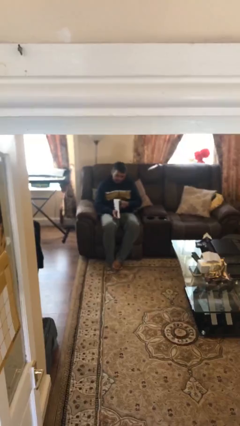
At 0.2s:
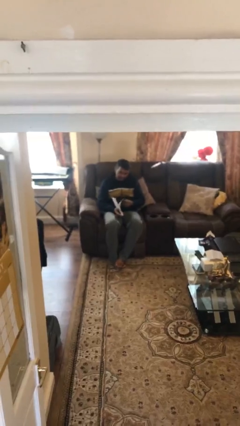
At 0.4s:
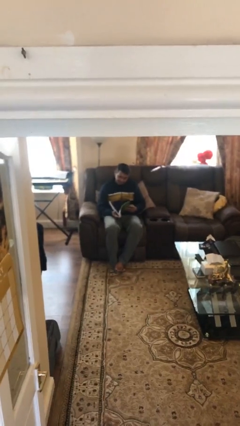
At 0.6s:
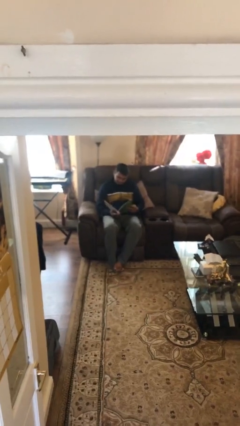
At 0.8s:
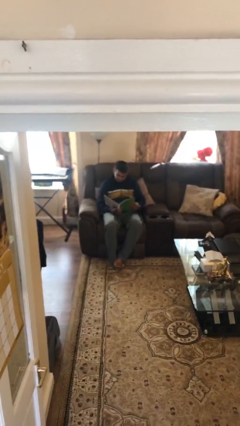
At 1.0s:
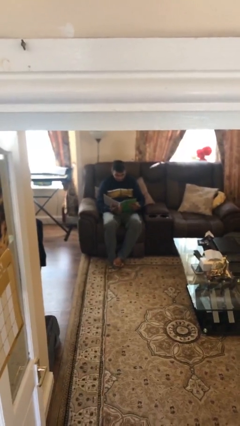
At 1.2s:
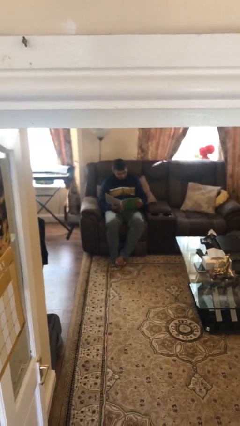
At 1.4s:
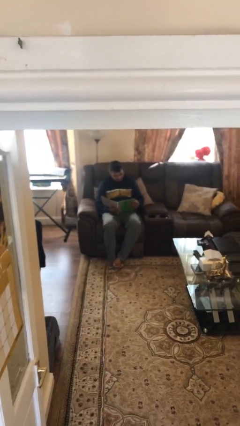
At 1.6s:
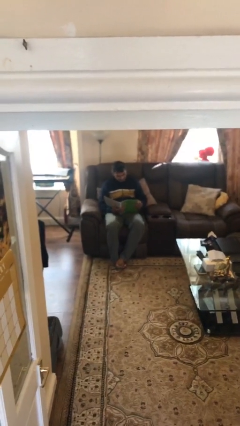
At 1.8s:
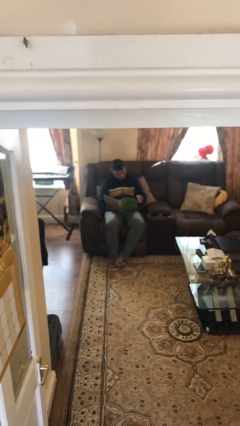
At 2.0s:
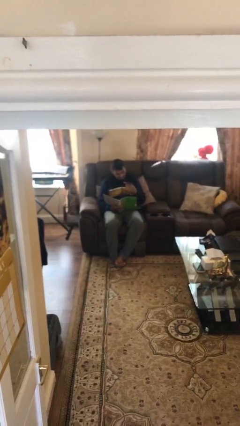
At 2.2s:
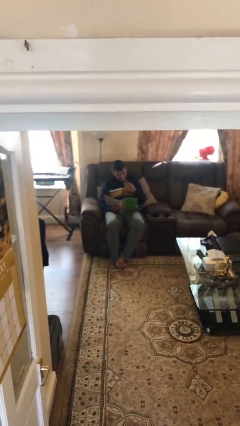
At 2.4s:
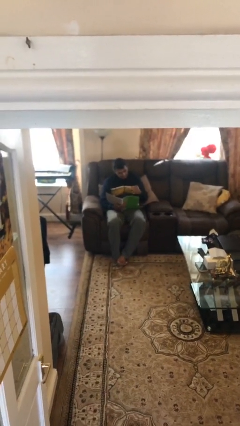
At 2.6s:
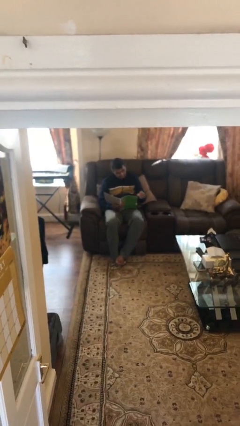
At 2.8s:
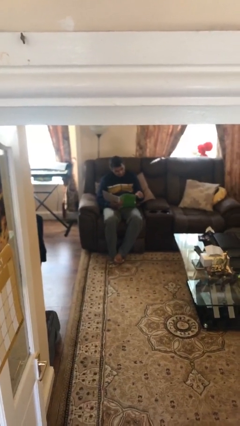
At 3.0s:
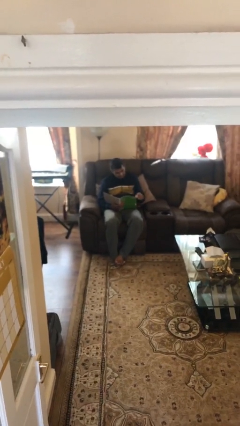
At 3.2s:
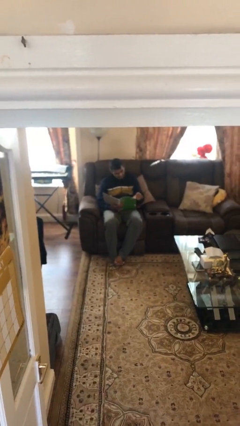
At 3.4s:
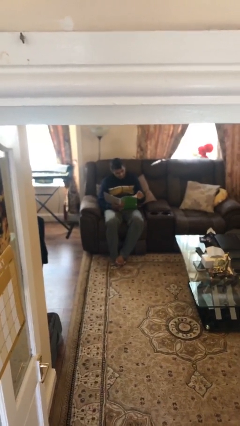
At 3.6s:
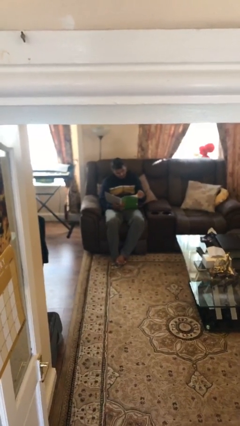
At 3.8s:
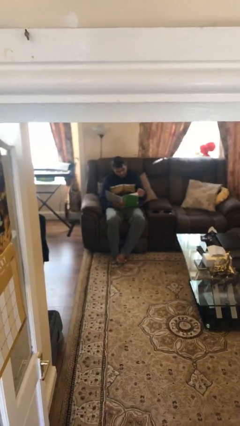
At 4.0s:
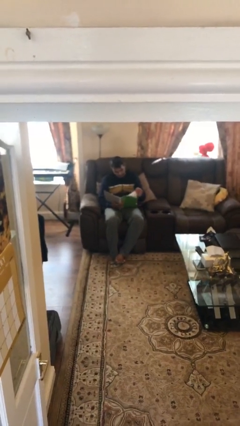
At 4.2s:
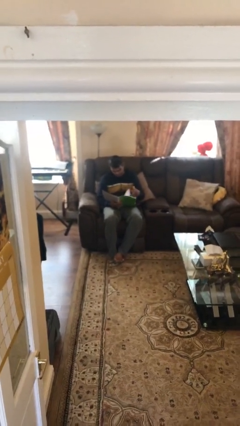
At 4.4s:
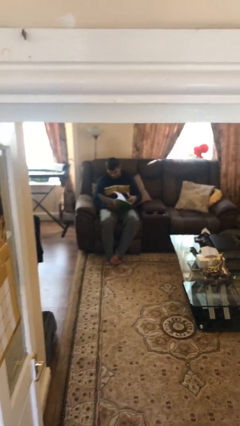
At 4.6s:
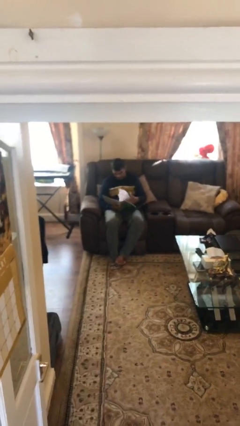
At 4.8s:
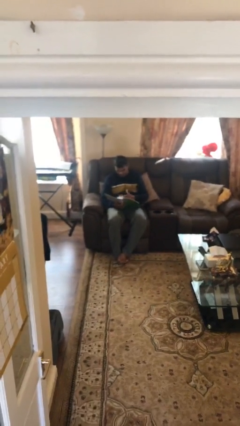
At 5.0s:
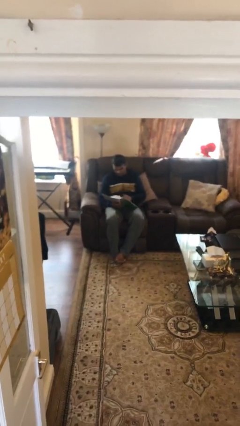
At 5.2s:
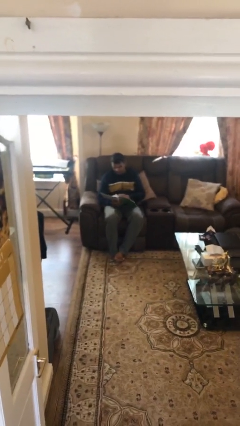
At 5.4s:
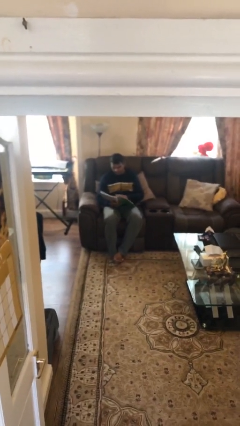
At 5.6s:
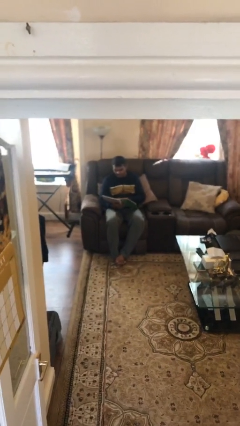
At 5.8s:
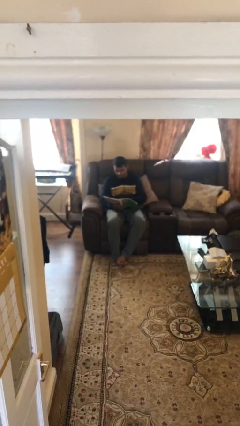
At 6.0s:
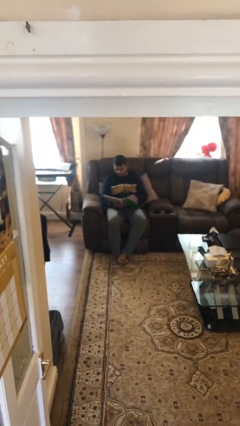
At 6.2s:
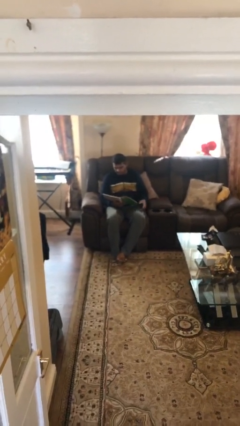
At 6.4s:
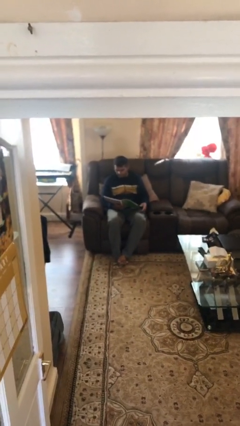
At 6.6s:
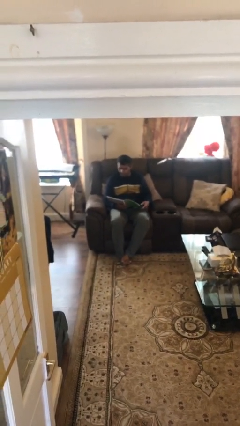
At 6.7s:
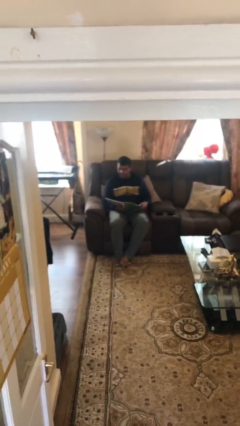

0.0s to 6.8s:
person reads document

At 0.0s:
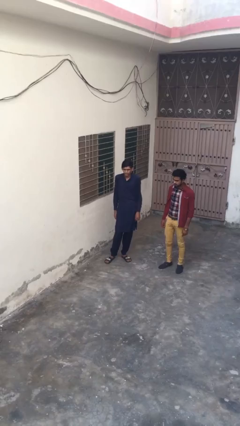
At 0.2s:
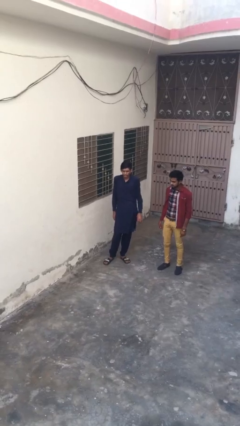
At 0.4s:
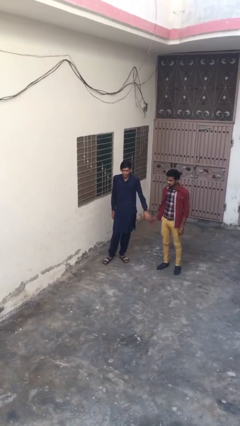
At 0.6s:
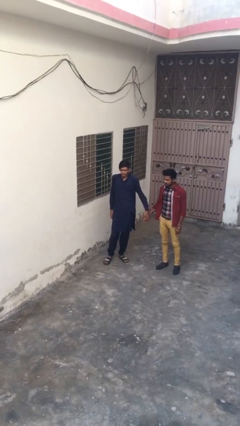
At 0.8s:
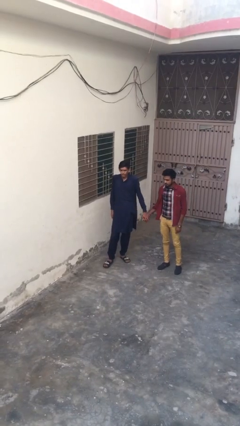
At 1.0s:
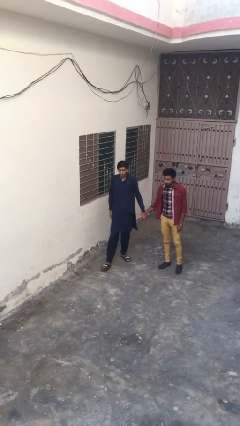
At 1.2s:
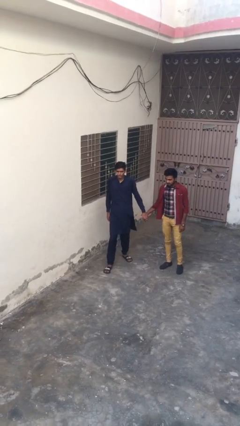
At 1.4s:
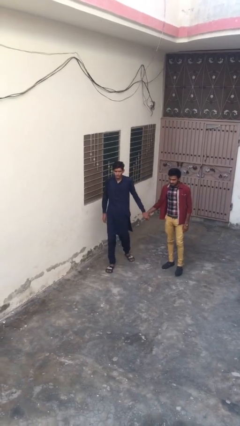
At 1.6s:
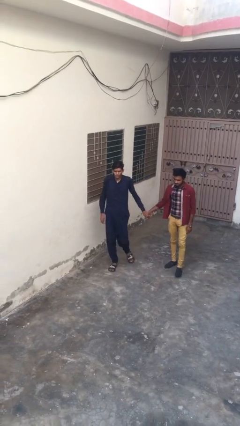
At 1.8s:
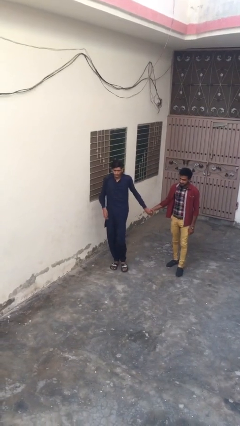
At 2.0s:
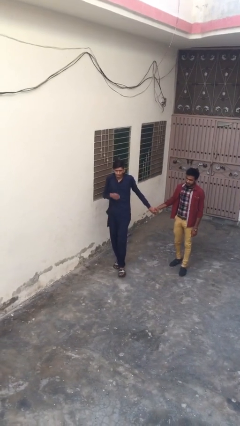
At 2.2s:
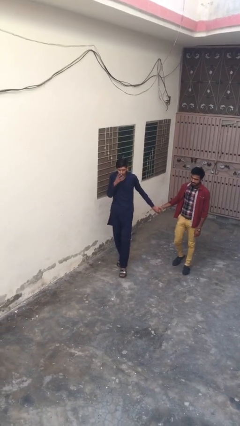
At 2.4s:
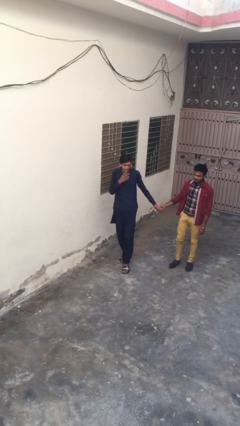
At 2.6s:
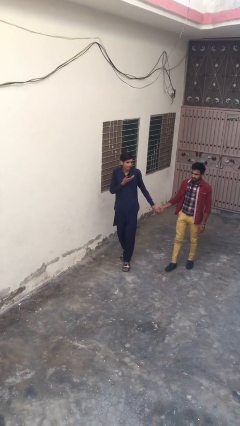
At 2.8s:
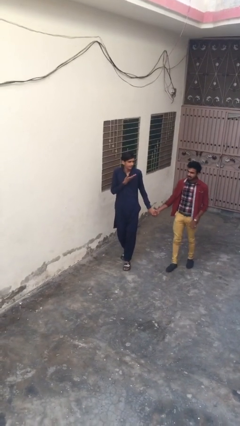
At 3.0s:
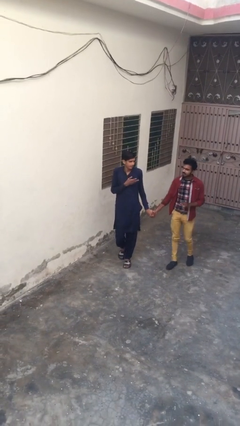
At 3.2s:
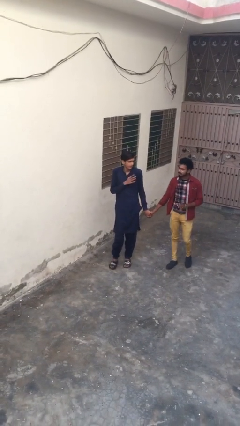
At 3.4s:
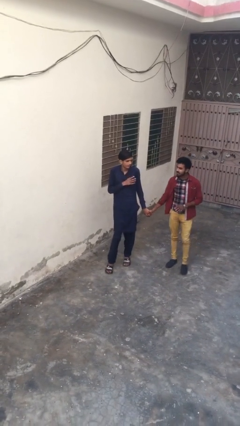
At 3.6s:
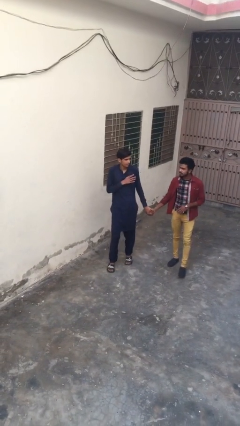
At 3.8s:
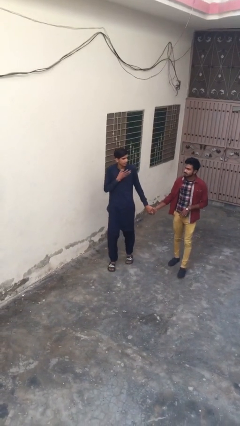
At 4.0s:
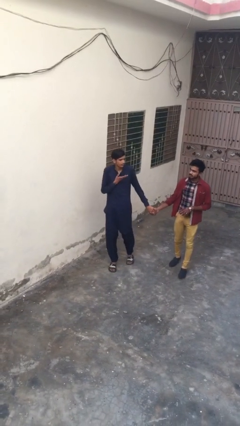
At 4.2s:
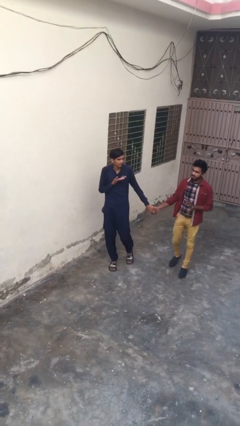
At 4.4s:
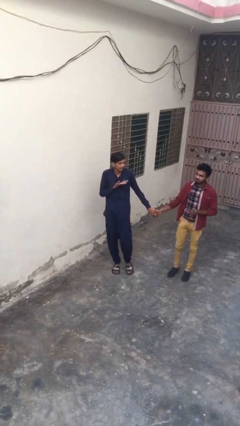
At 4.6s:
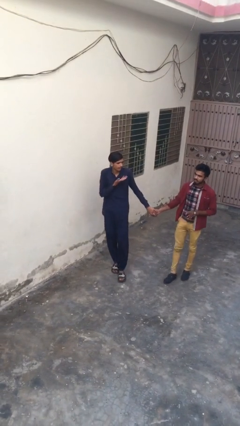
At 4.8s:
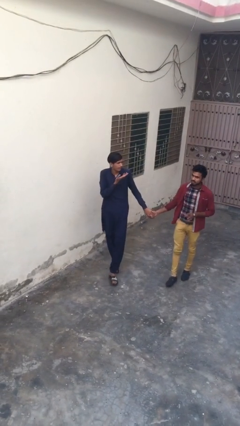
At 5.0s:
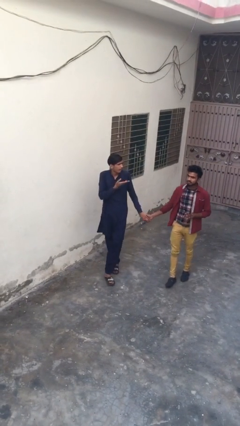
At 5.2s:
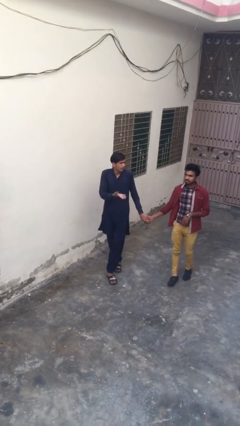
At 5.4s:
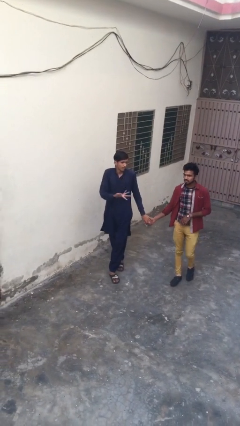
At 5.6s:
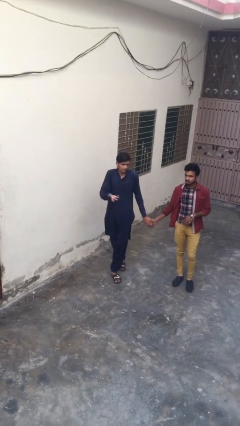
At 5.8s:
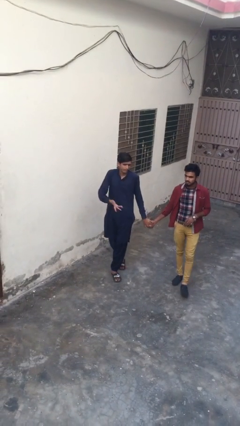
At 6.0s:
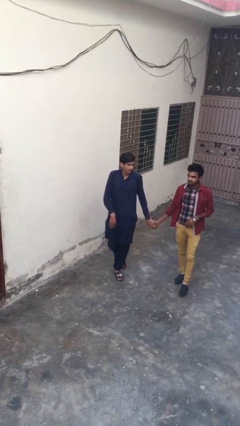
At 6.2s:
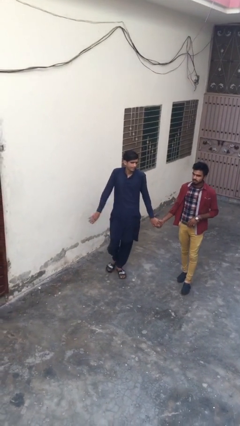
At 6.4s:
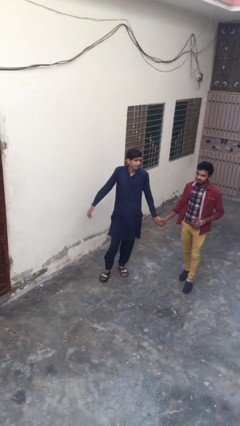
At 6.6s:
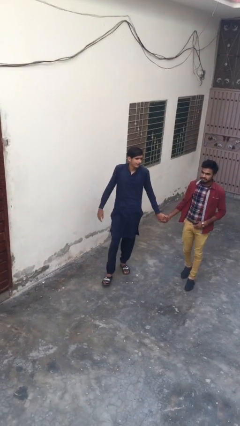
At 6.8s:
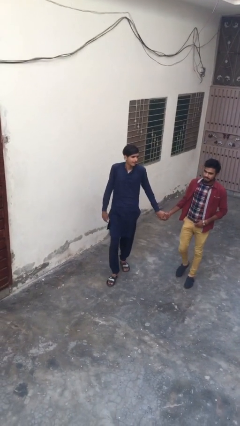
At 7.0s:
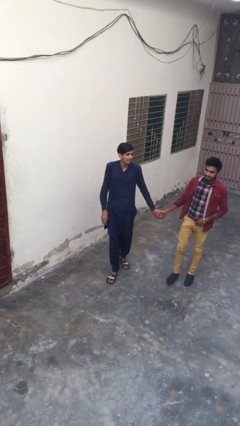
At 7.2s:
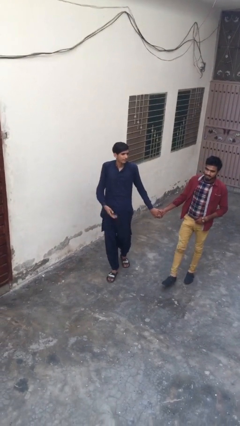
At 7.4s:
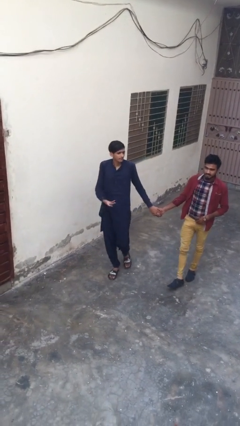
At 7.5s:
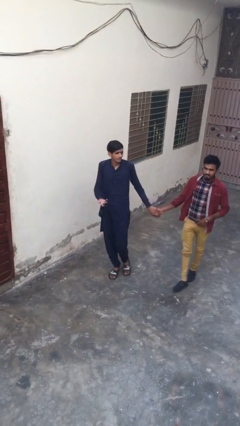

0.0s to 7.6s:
person holds hand

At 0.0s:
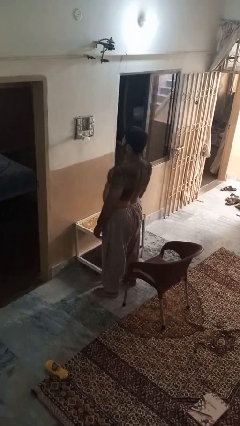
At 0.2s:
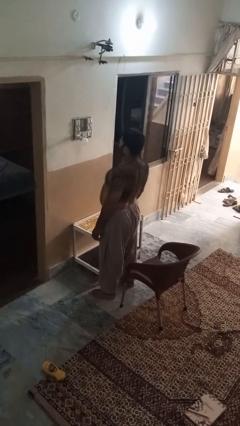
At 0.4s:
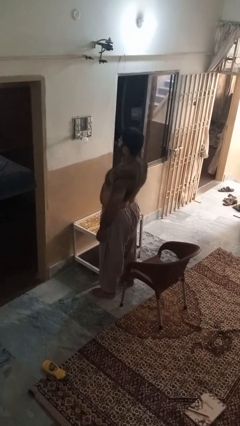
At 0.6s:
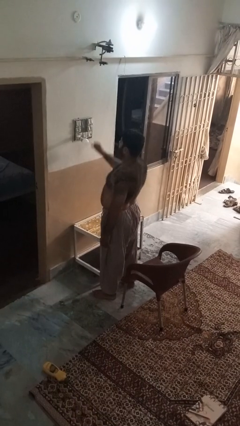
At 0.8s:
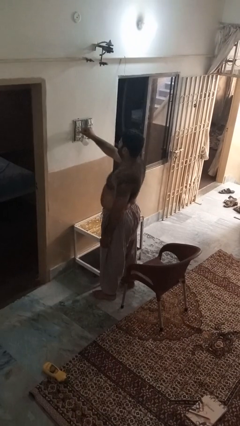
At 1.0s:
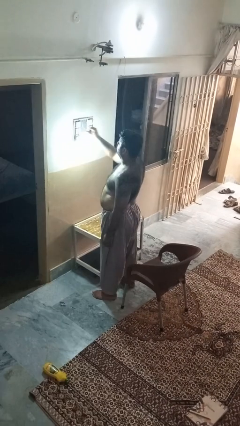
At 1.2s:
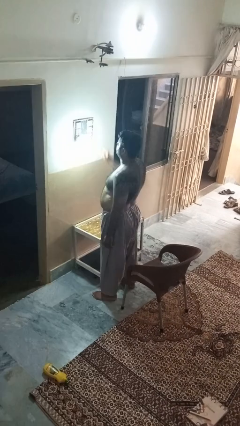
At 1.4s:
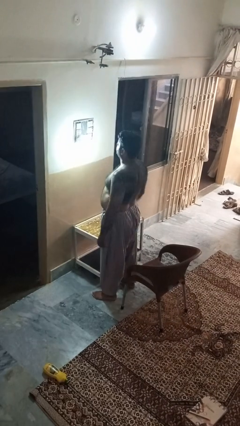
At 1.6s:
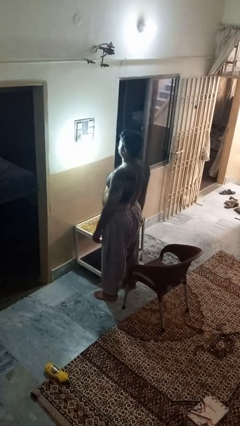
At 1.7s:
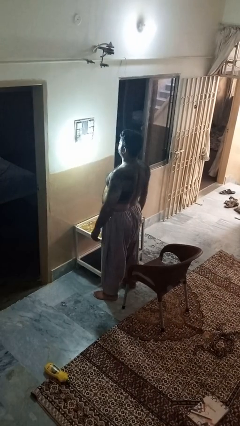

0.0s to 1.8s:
person turns on lamp

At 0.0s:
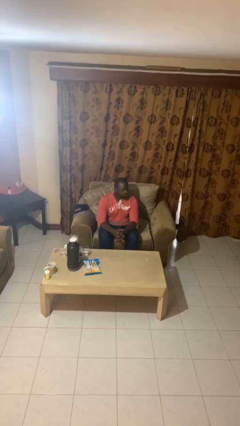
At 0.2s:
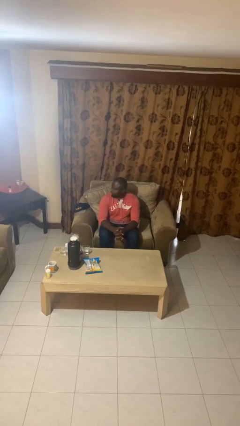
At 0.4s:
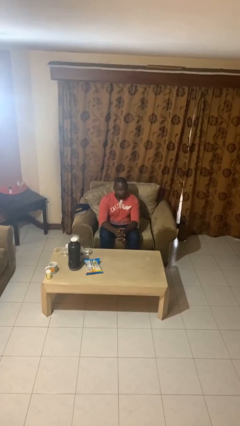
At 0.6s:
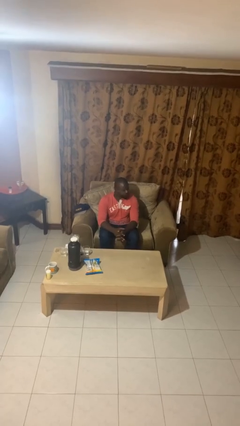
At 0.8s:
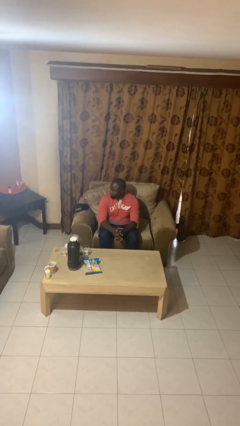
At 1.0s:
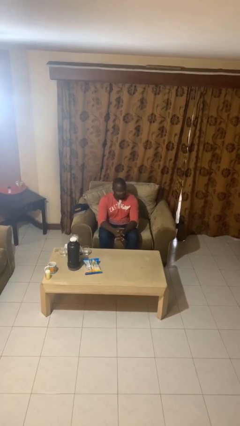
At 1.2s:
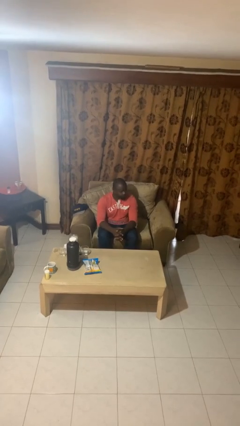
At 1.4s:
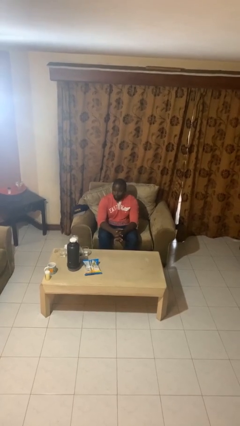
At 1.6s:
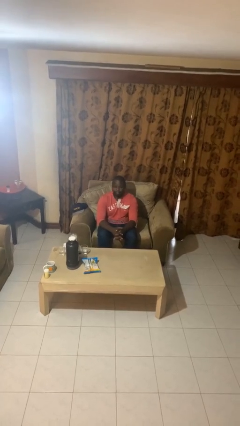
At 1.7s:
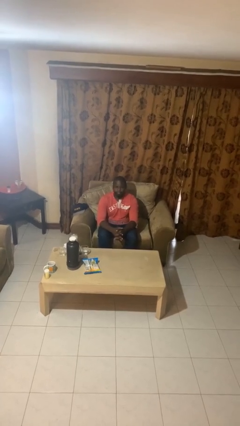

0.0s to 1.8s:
person shakes head
